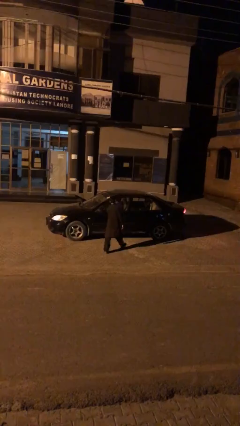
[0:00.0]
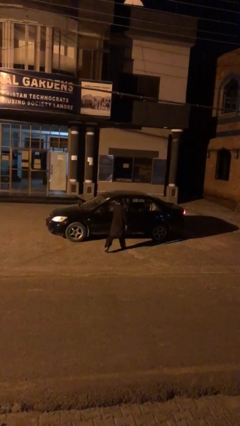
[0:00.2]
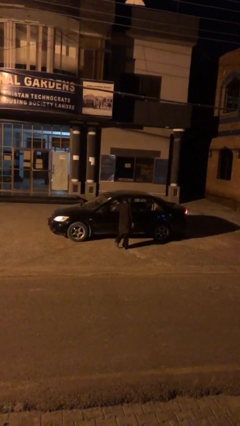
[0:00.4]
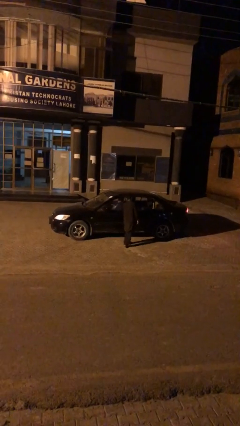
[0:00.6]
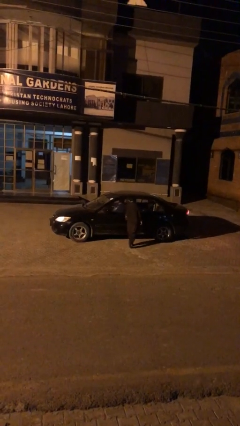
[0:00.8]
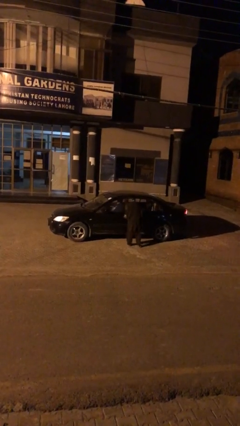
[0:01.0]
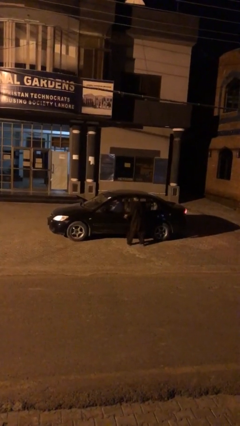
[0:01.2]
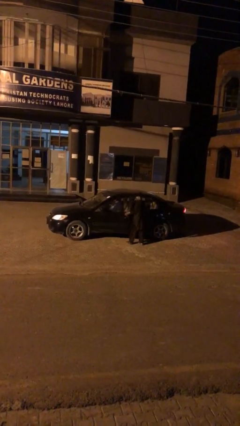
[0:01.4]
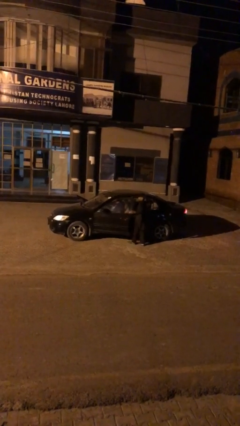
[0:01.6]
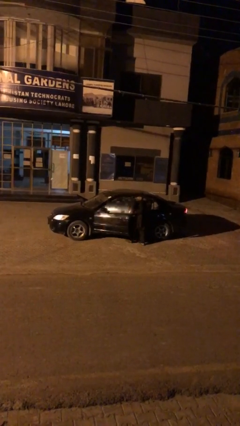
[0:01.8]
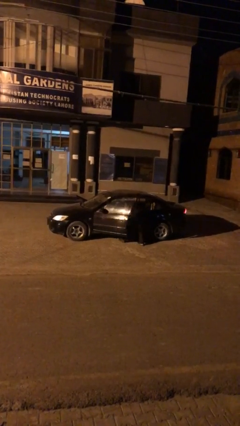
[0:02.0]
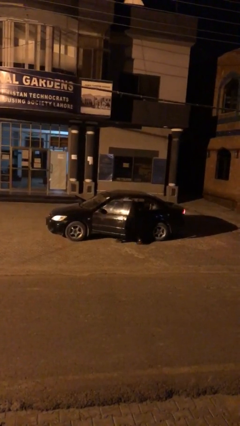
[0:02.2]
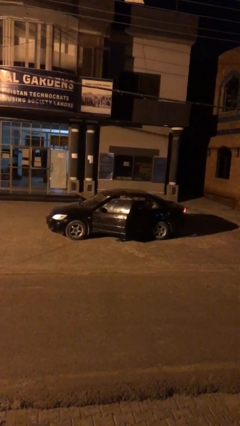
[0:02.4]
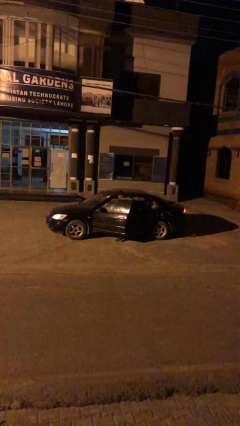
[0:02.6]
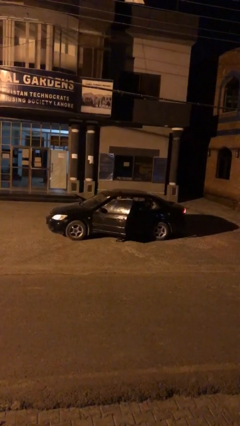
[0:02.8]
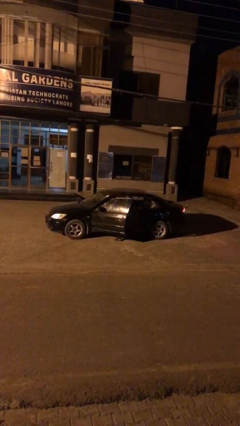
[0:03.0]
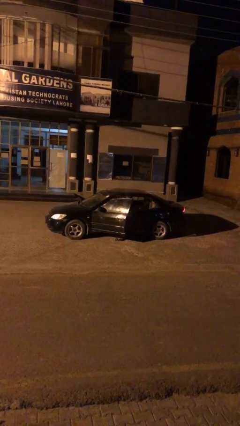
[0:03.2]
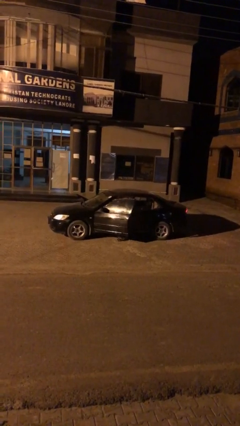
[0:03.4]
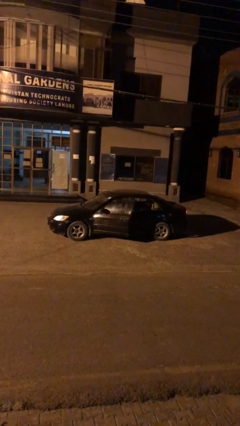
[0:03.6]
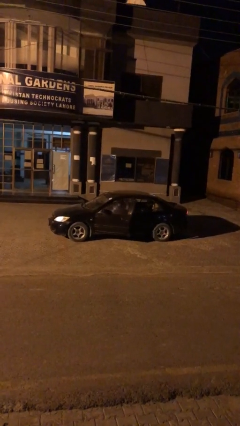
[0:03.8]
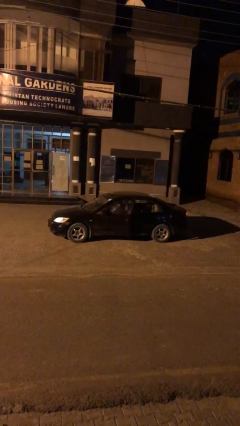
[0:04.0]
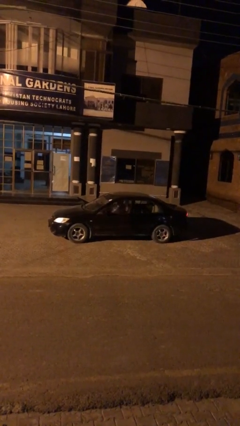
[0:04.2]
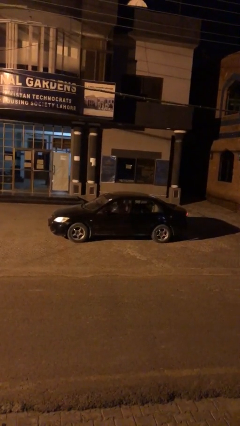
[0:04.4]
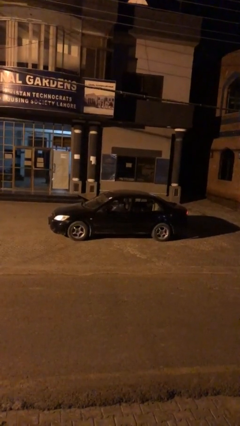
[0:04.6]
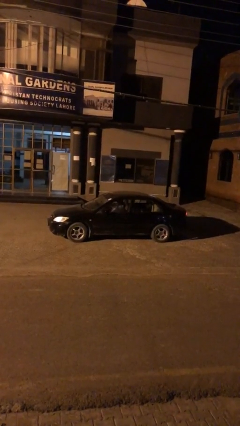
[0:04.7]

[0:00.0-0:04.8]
car picks up person

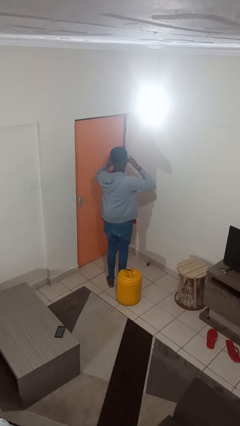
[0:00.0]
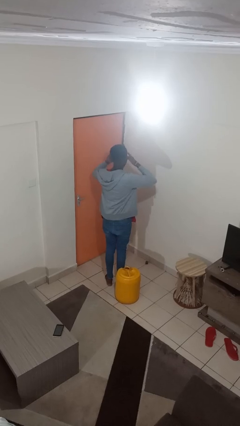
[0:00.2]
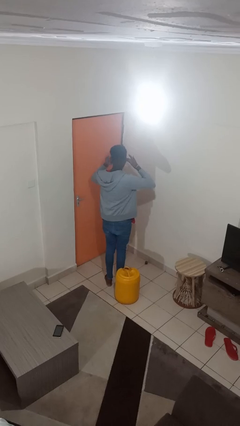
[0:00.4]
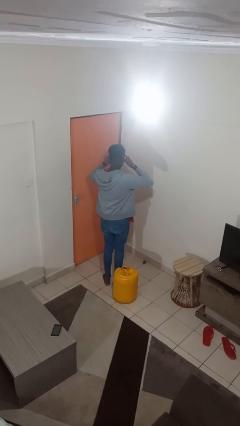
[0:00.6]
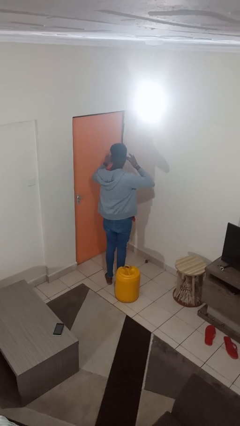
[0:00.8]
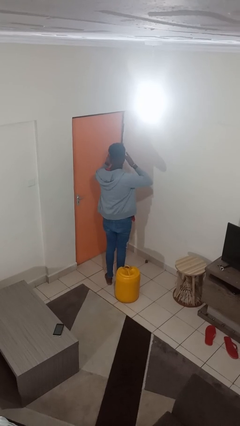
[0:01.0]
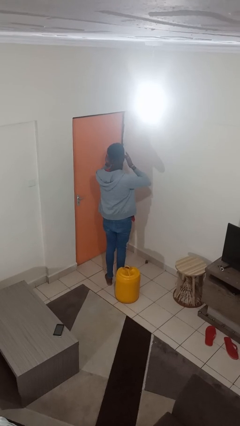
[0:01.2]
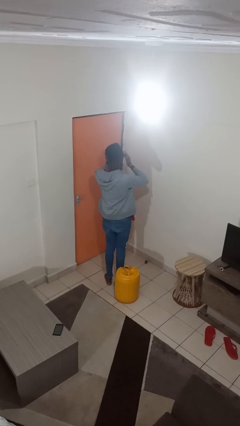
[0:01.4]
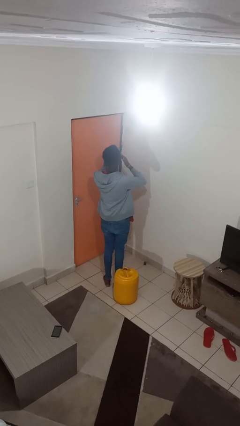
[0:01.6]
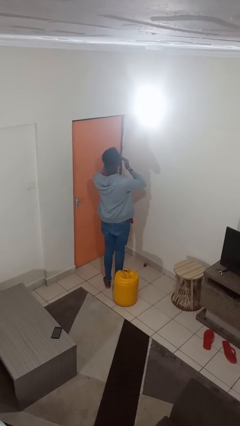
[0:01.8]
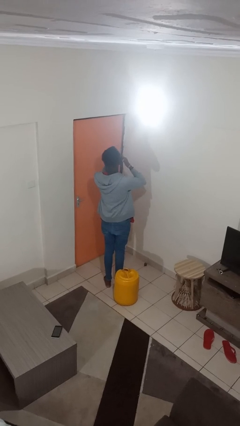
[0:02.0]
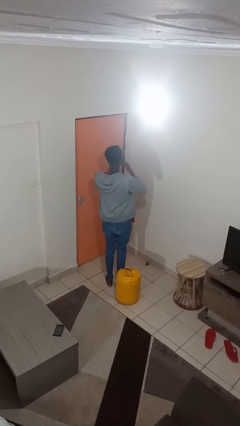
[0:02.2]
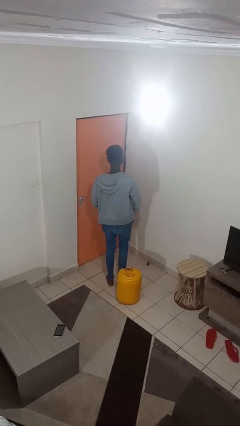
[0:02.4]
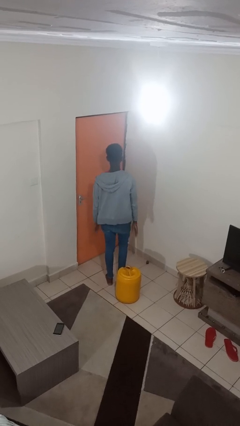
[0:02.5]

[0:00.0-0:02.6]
person rubs eyes

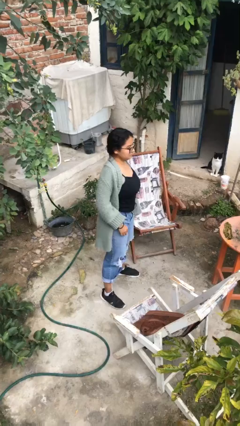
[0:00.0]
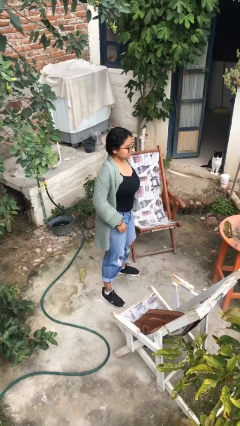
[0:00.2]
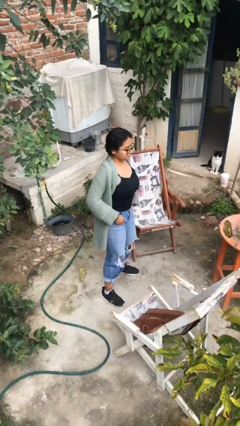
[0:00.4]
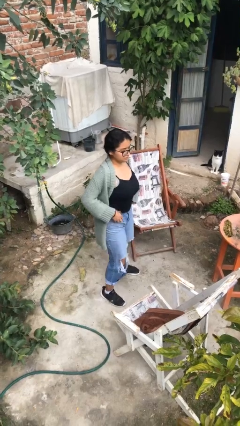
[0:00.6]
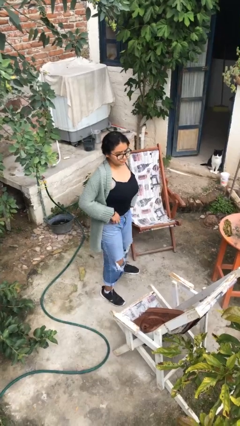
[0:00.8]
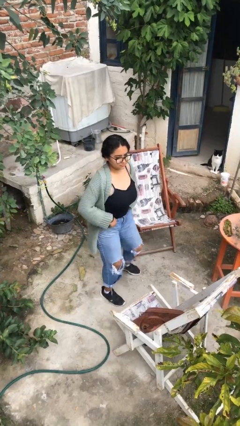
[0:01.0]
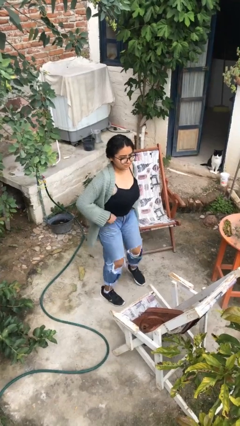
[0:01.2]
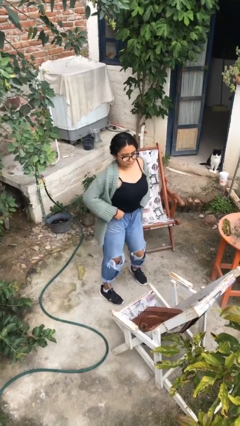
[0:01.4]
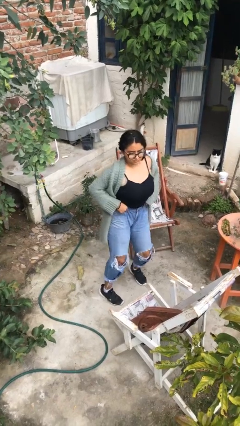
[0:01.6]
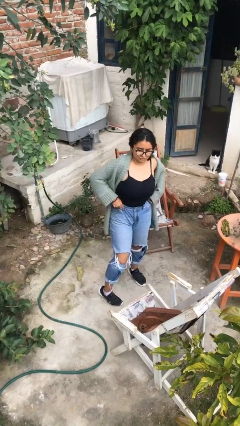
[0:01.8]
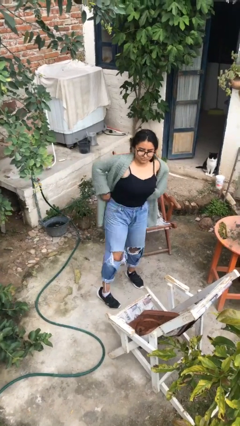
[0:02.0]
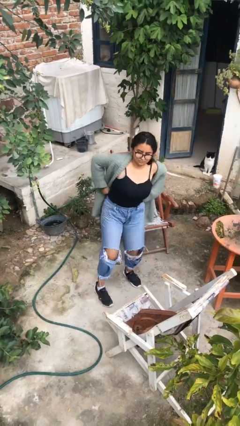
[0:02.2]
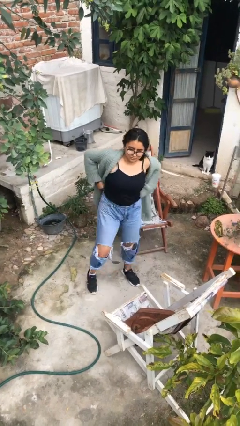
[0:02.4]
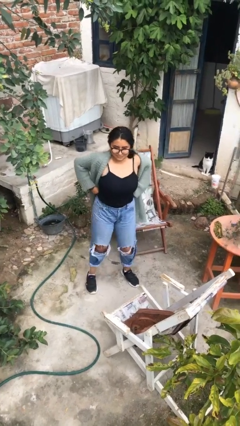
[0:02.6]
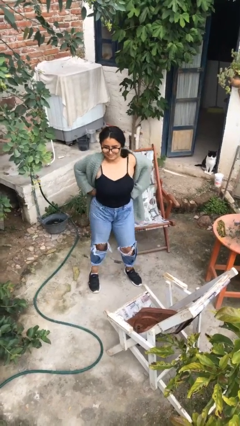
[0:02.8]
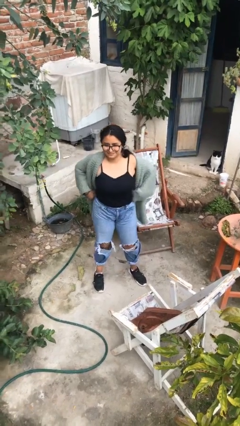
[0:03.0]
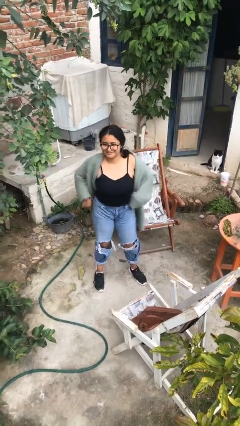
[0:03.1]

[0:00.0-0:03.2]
person hikes up pants

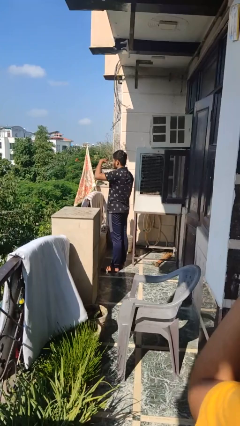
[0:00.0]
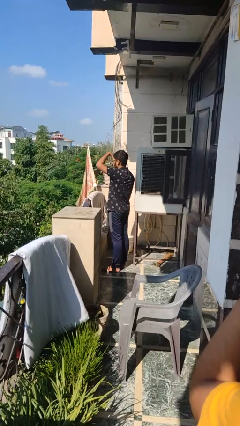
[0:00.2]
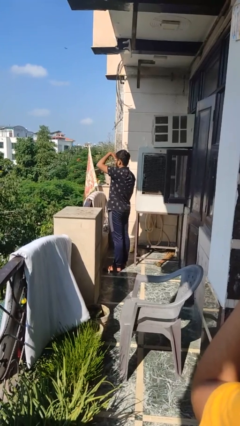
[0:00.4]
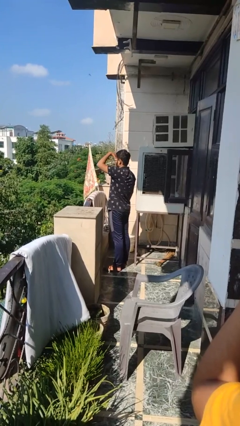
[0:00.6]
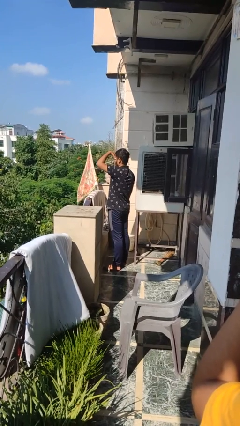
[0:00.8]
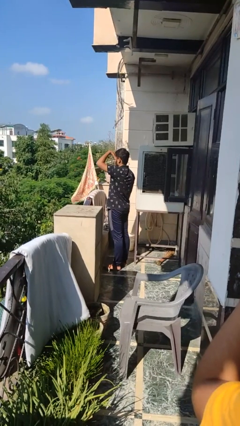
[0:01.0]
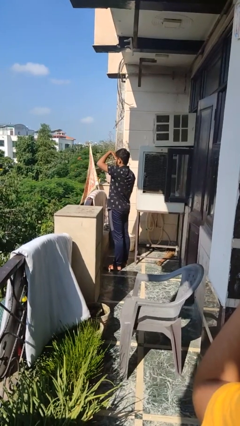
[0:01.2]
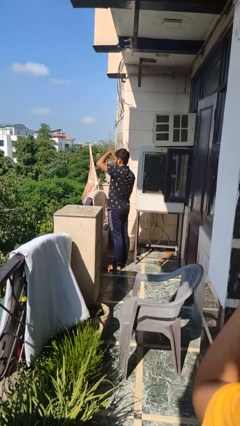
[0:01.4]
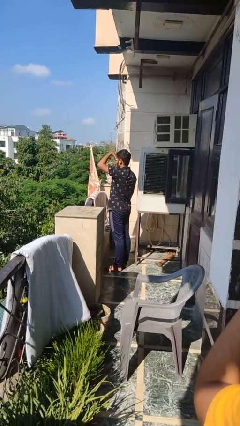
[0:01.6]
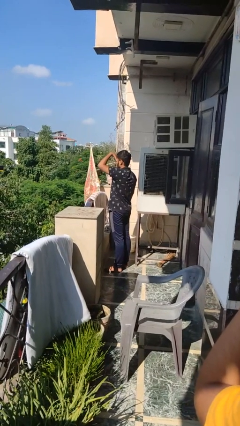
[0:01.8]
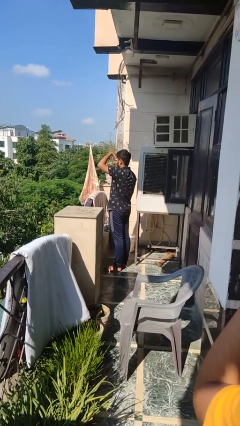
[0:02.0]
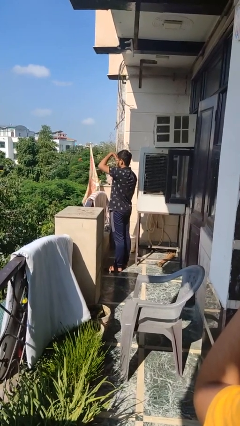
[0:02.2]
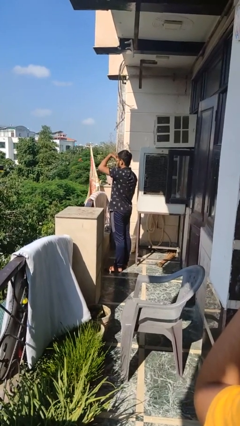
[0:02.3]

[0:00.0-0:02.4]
person shades eyes

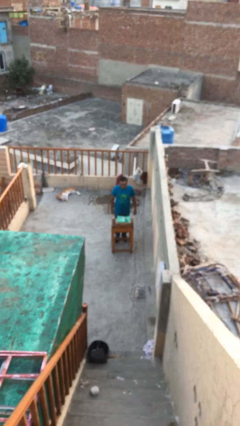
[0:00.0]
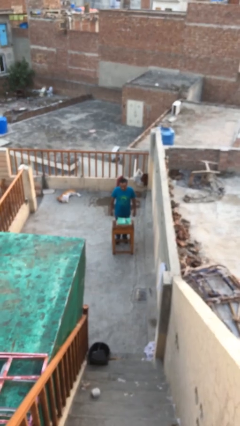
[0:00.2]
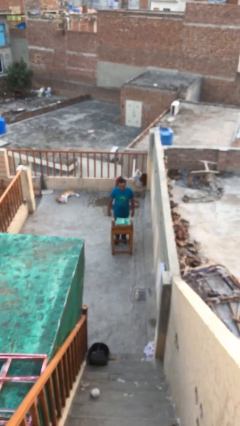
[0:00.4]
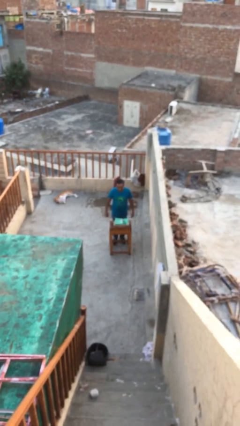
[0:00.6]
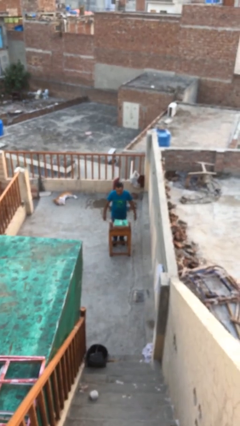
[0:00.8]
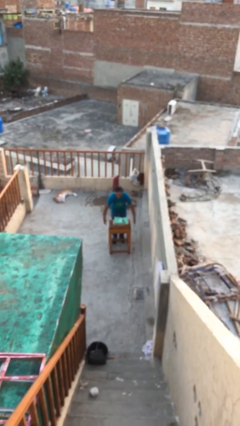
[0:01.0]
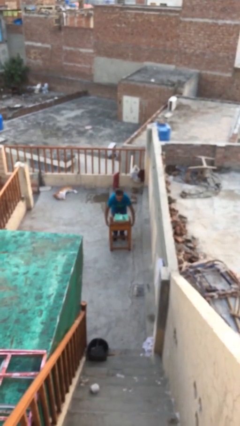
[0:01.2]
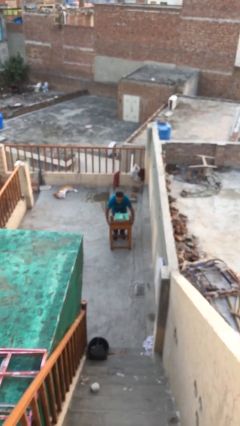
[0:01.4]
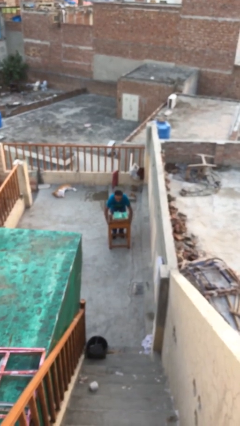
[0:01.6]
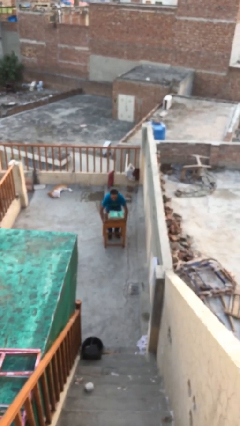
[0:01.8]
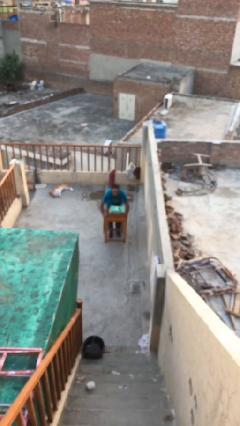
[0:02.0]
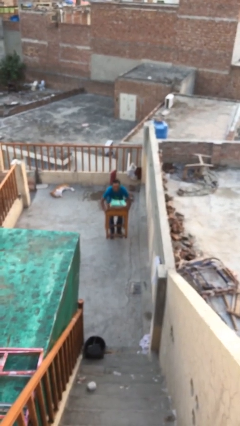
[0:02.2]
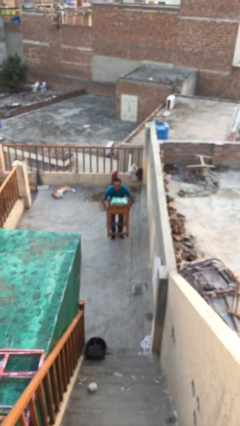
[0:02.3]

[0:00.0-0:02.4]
person picks up object from floor

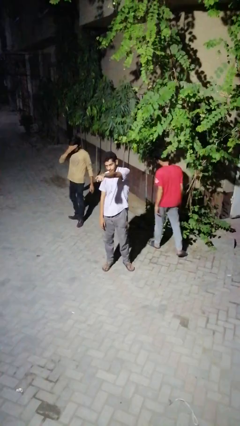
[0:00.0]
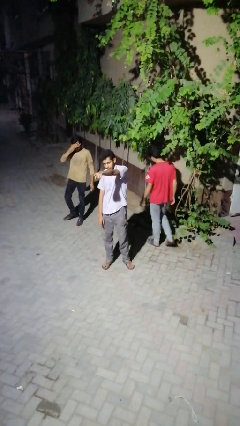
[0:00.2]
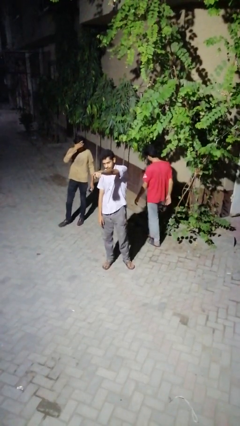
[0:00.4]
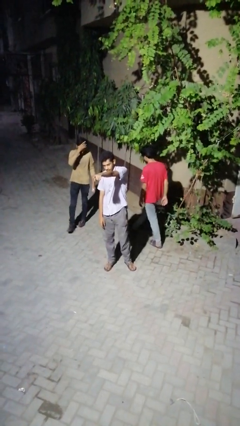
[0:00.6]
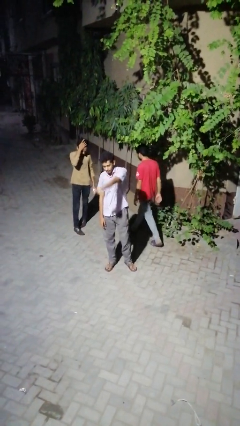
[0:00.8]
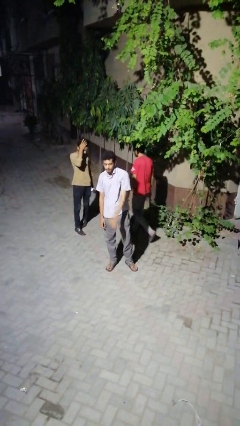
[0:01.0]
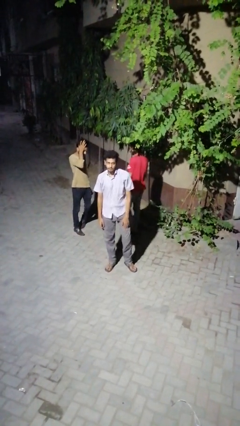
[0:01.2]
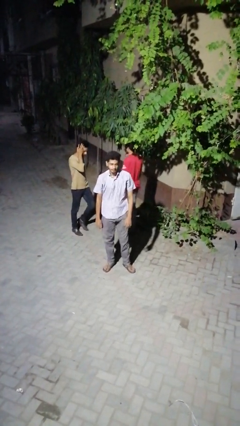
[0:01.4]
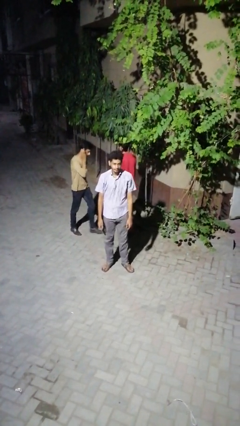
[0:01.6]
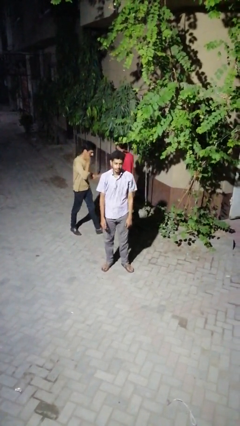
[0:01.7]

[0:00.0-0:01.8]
person points at person

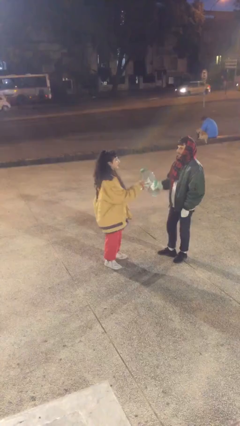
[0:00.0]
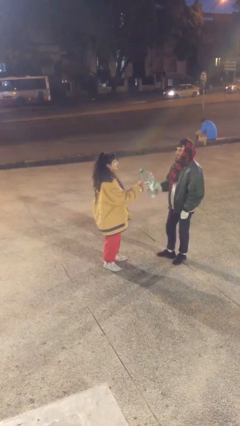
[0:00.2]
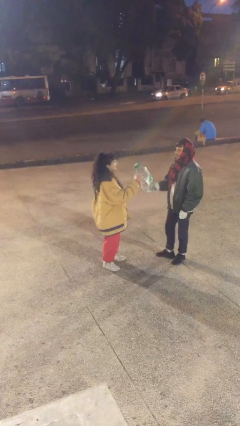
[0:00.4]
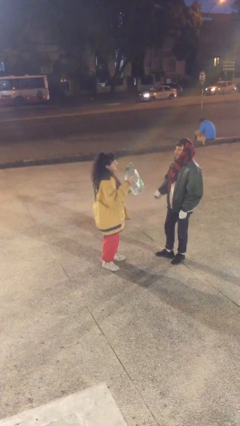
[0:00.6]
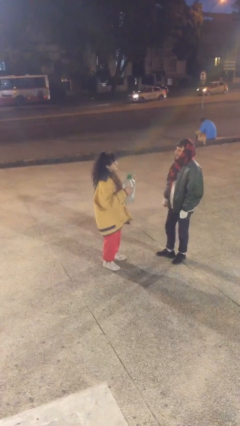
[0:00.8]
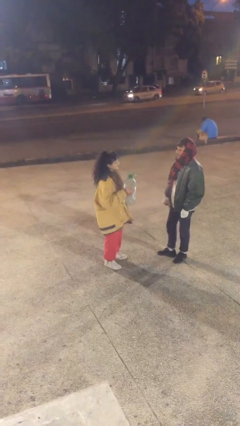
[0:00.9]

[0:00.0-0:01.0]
person transfers object to person
